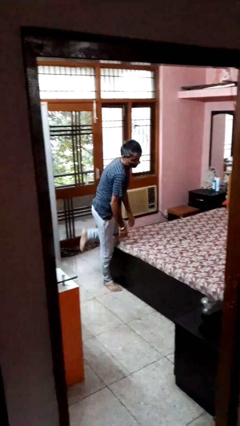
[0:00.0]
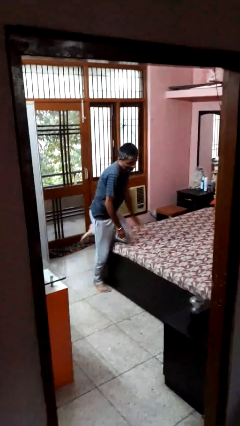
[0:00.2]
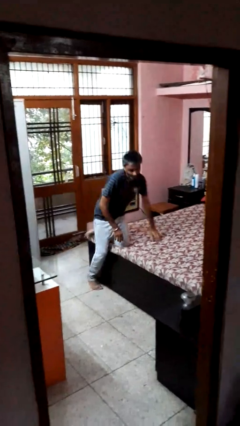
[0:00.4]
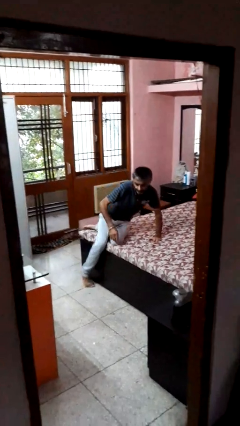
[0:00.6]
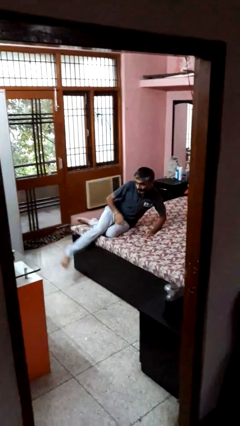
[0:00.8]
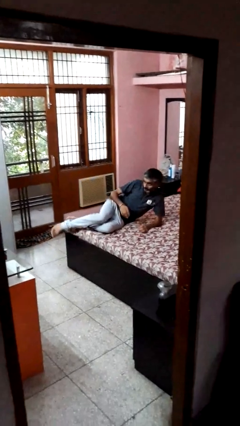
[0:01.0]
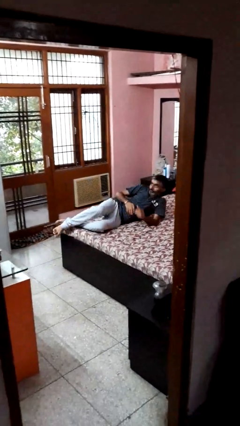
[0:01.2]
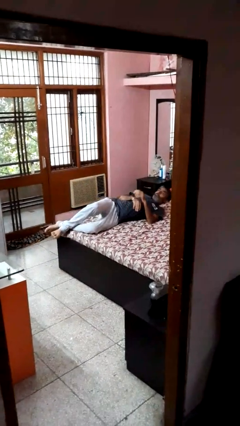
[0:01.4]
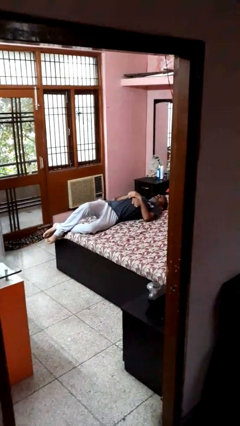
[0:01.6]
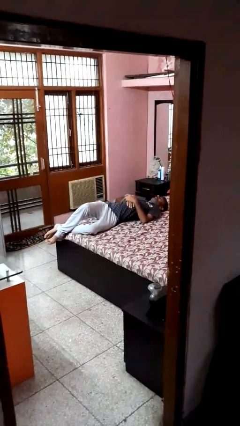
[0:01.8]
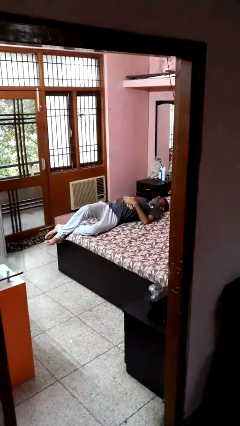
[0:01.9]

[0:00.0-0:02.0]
person lies down on bed

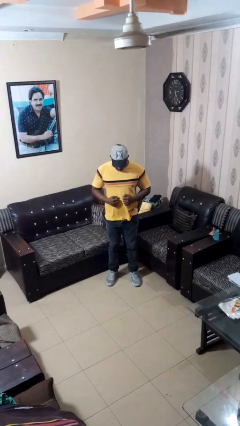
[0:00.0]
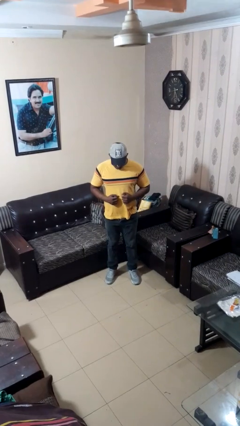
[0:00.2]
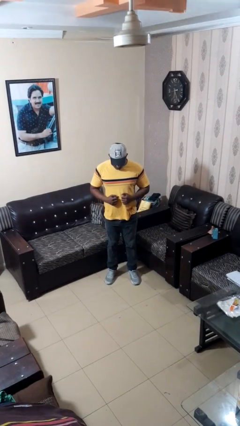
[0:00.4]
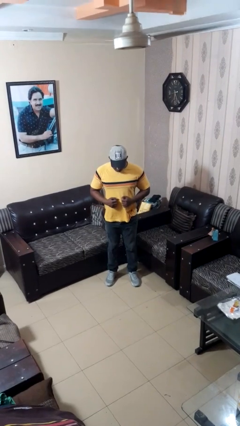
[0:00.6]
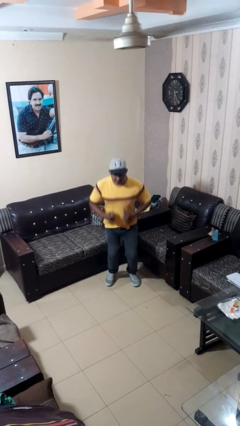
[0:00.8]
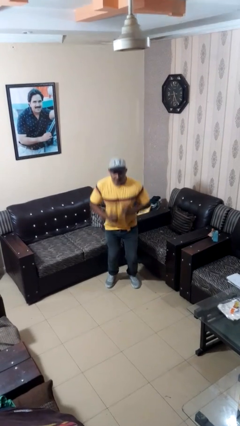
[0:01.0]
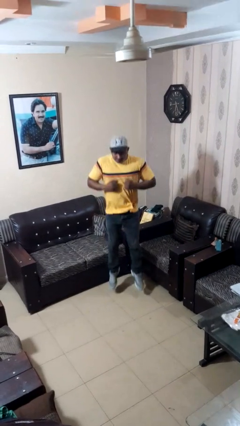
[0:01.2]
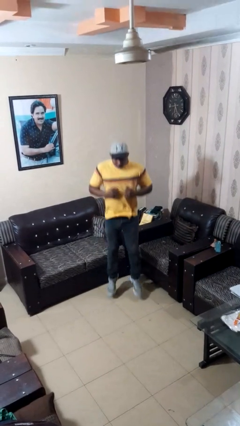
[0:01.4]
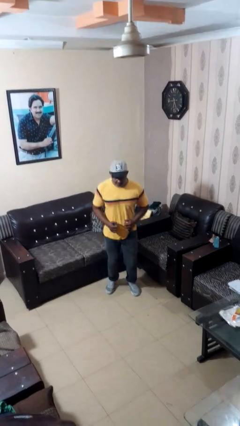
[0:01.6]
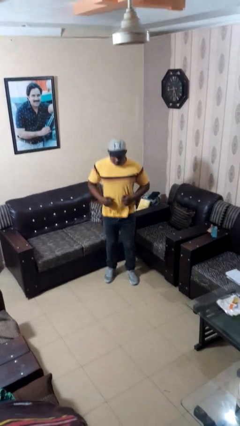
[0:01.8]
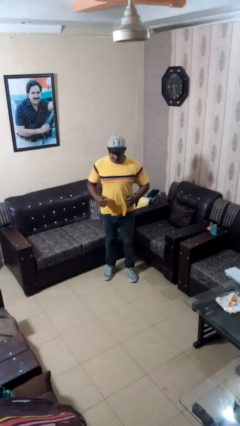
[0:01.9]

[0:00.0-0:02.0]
person jumps

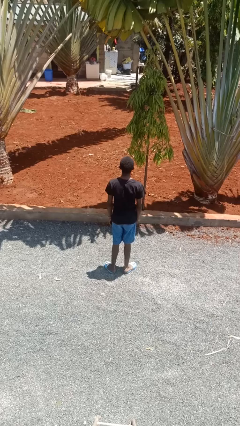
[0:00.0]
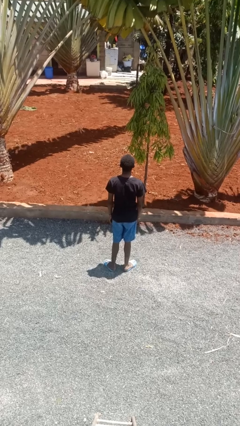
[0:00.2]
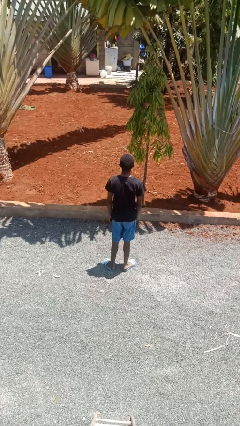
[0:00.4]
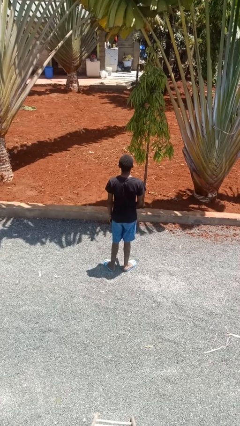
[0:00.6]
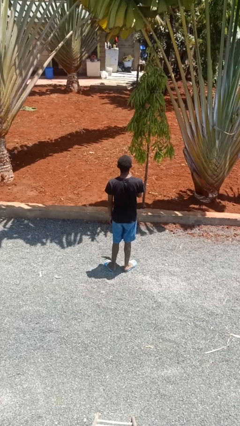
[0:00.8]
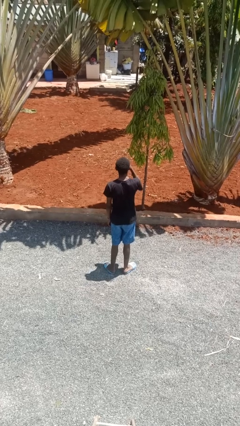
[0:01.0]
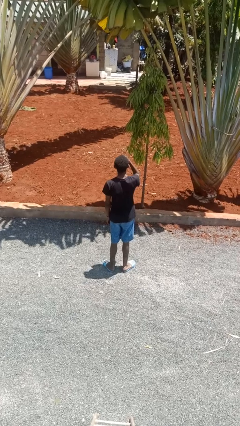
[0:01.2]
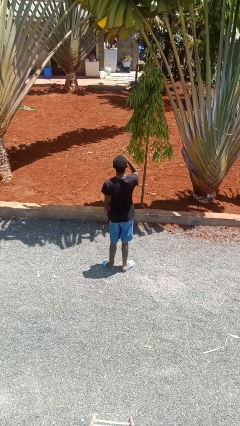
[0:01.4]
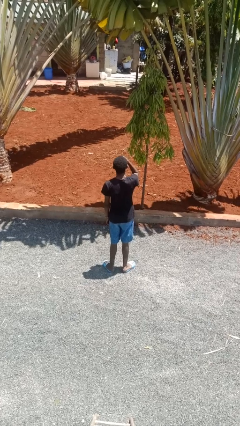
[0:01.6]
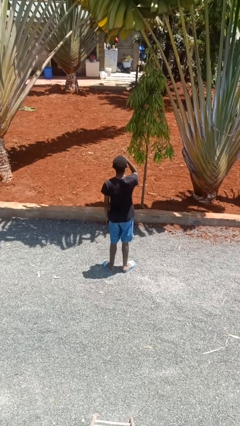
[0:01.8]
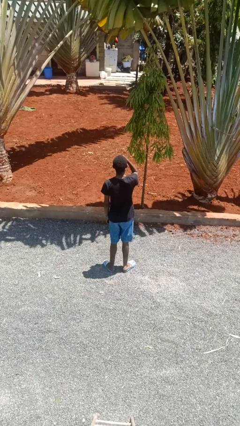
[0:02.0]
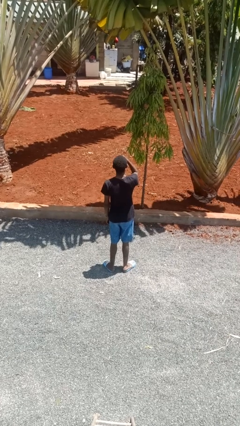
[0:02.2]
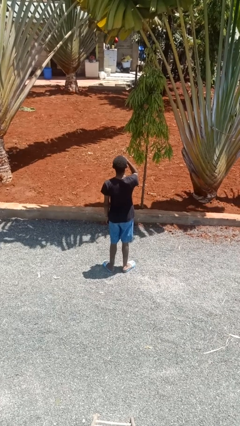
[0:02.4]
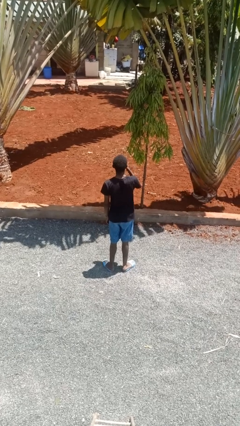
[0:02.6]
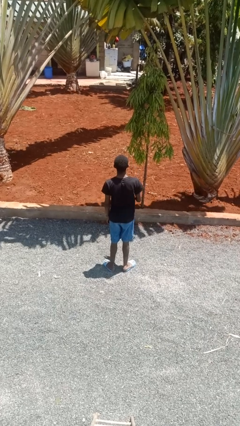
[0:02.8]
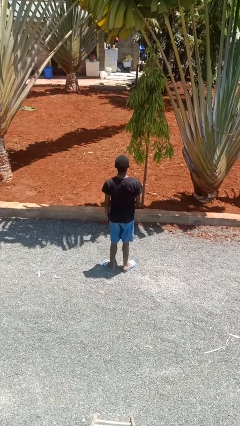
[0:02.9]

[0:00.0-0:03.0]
person shades eyes

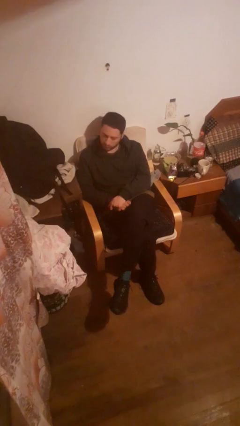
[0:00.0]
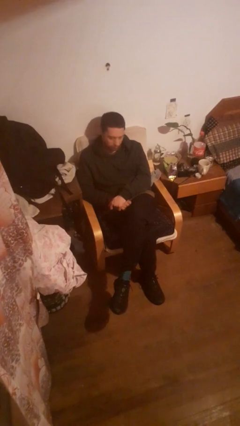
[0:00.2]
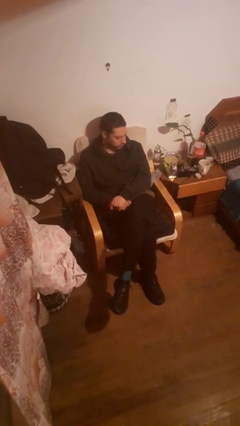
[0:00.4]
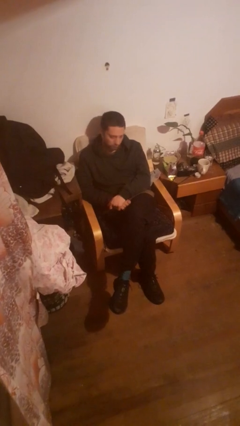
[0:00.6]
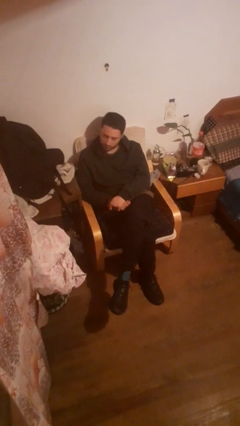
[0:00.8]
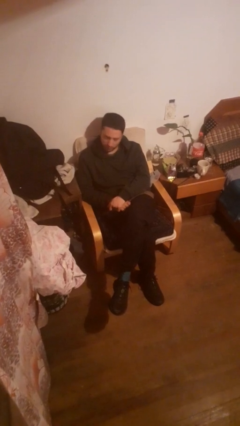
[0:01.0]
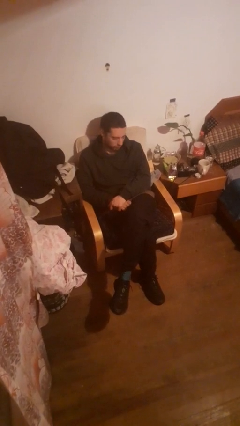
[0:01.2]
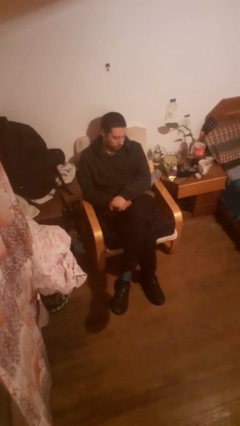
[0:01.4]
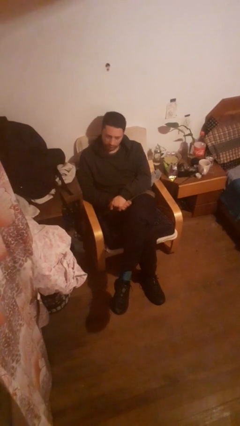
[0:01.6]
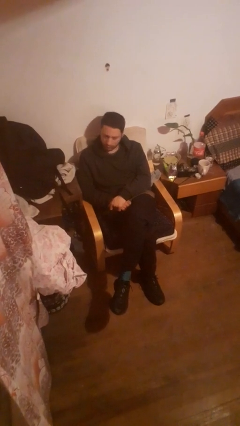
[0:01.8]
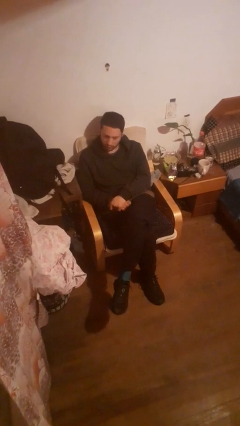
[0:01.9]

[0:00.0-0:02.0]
person shakes head

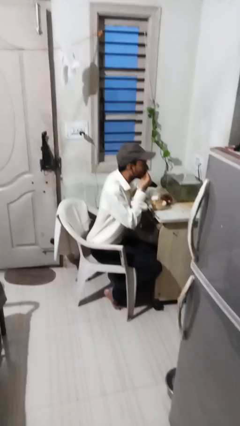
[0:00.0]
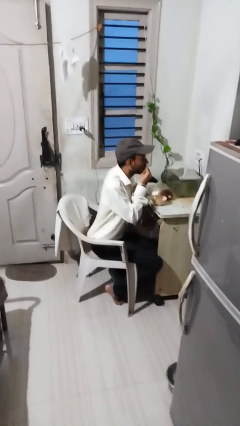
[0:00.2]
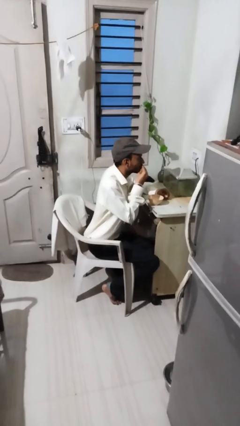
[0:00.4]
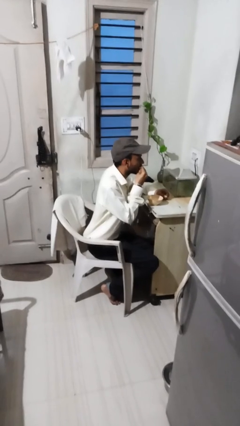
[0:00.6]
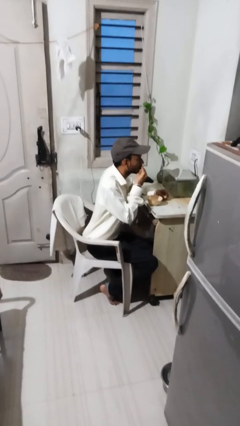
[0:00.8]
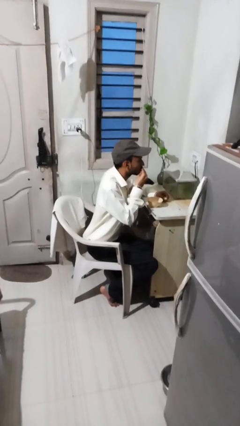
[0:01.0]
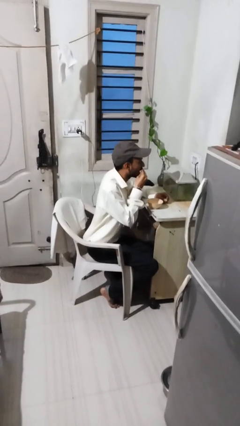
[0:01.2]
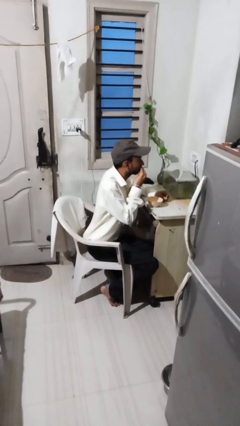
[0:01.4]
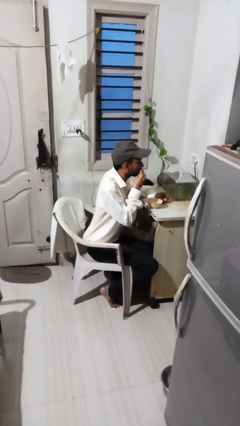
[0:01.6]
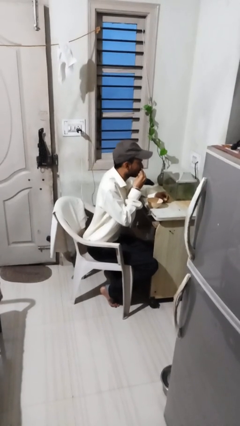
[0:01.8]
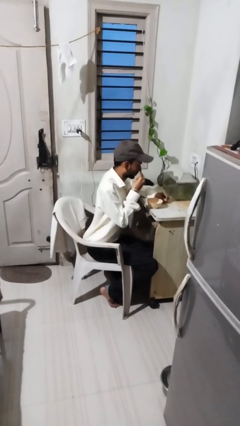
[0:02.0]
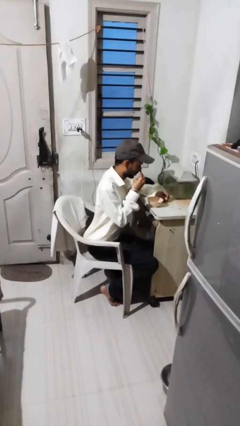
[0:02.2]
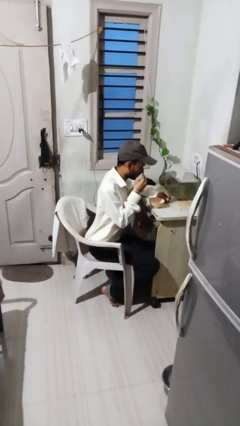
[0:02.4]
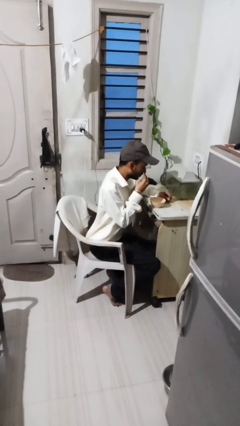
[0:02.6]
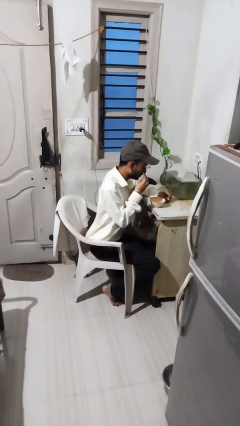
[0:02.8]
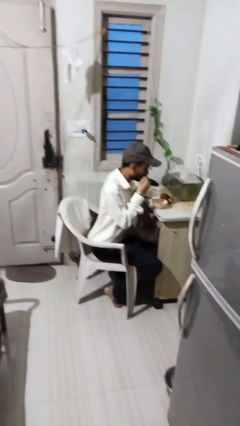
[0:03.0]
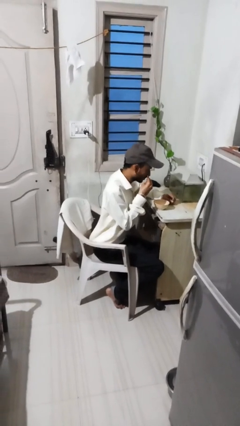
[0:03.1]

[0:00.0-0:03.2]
person eats with hands

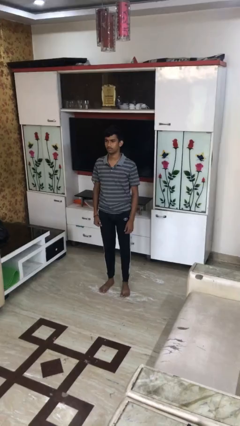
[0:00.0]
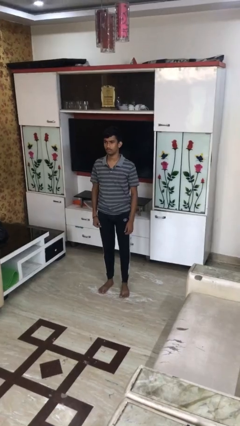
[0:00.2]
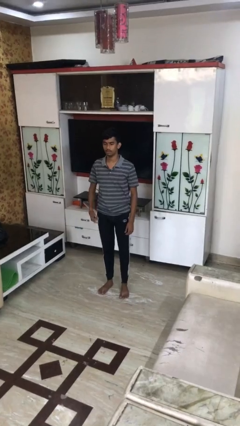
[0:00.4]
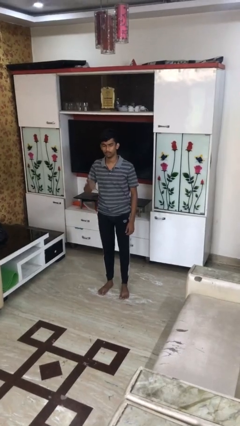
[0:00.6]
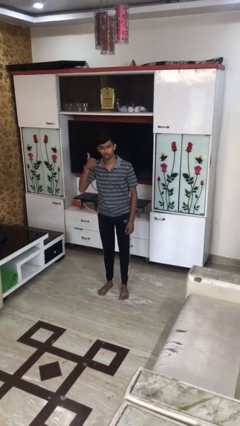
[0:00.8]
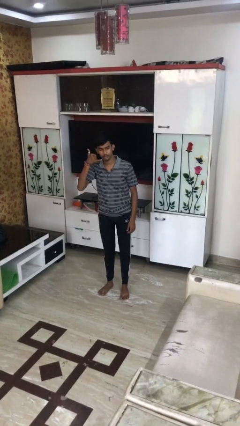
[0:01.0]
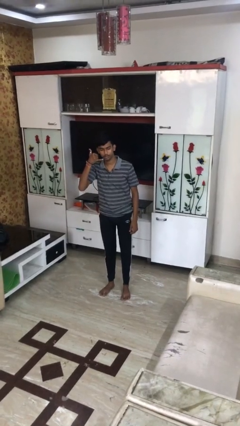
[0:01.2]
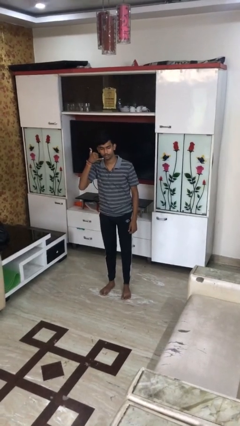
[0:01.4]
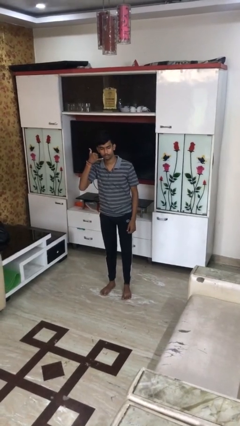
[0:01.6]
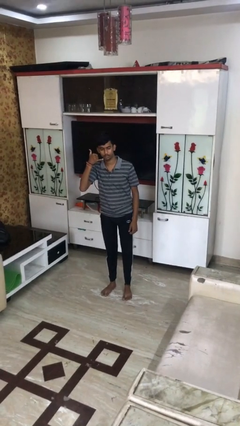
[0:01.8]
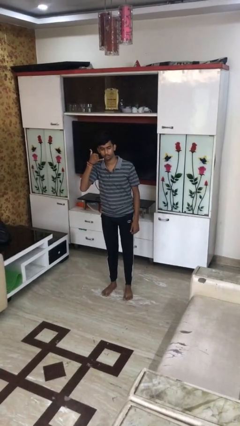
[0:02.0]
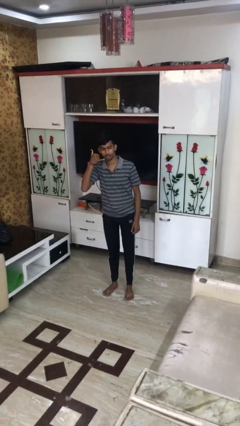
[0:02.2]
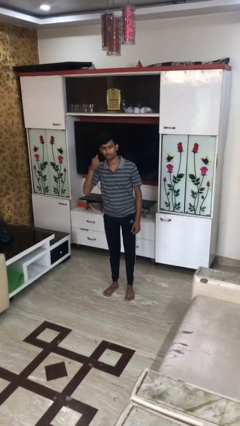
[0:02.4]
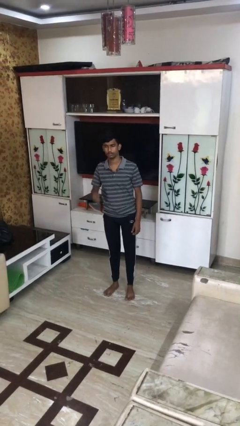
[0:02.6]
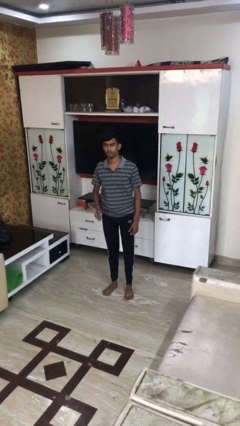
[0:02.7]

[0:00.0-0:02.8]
person gestures call me

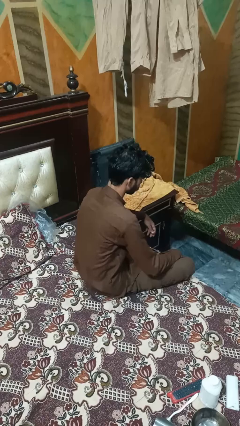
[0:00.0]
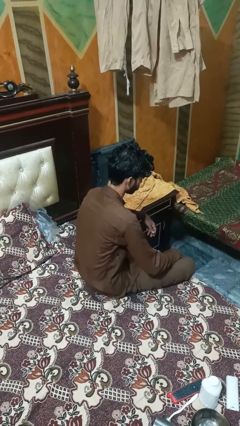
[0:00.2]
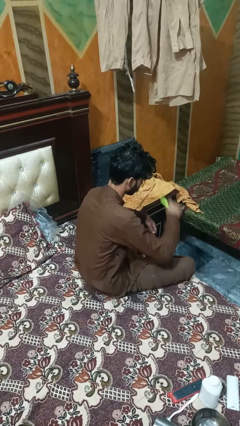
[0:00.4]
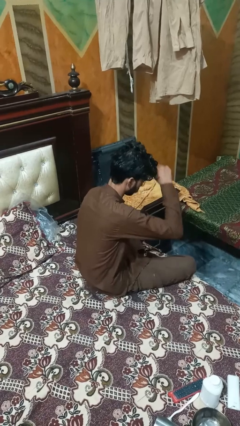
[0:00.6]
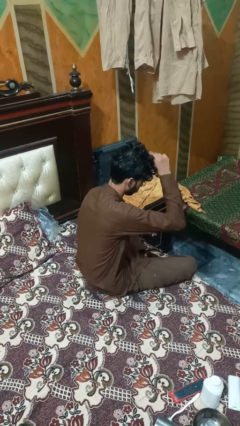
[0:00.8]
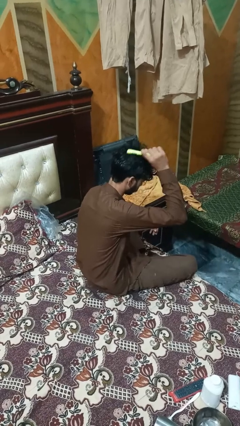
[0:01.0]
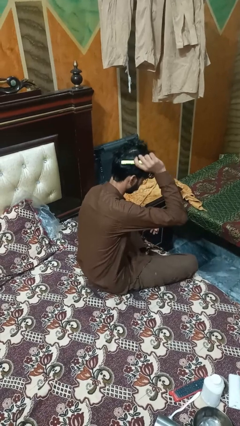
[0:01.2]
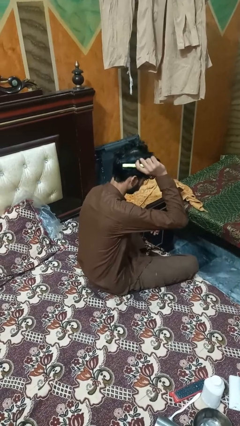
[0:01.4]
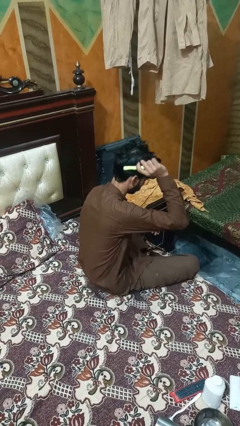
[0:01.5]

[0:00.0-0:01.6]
person brushes hair

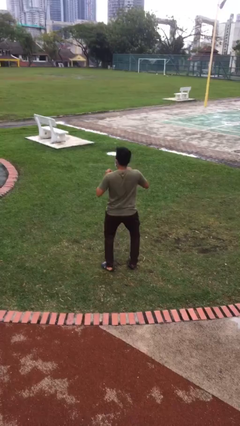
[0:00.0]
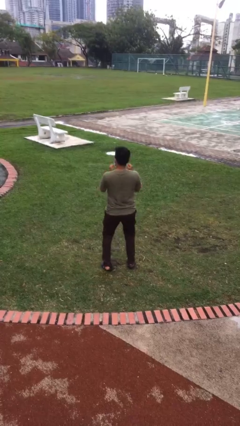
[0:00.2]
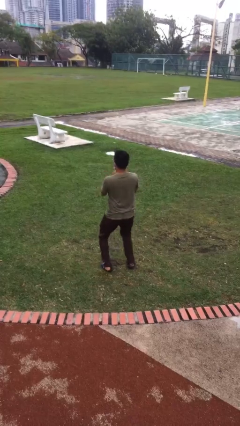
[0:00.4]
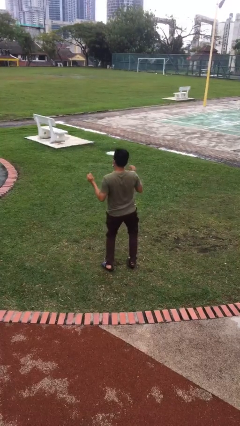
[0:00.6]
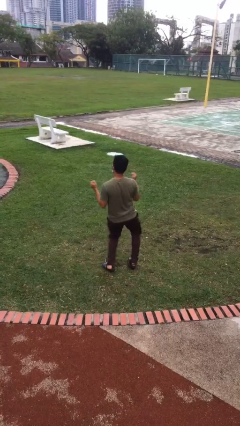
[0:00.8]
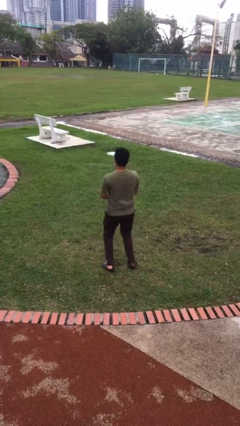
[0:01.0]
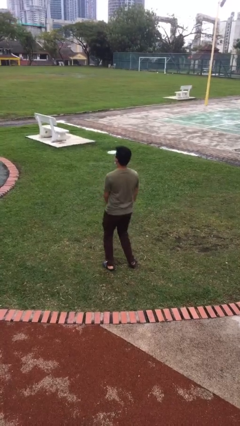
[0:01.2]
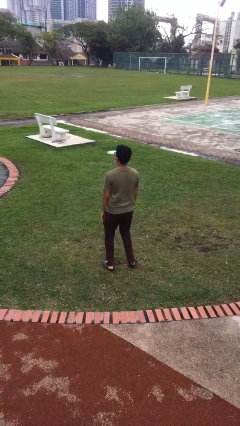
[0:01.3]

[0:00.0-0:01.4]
person dances in place
